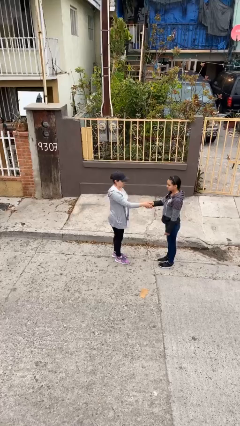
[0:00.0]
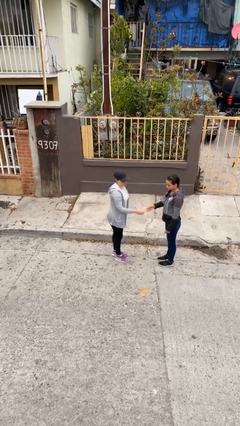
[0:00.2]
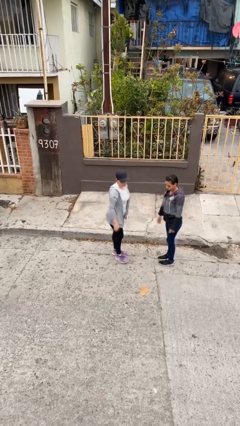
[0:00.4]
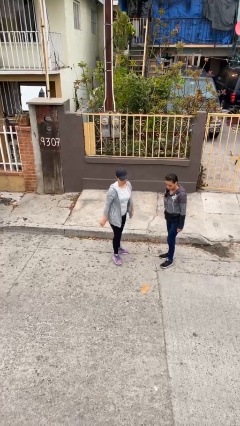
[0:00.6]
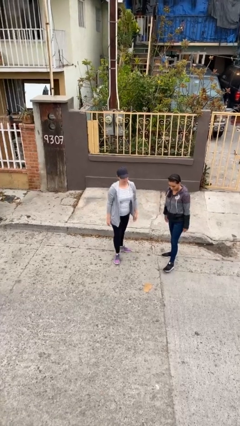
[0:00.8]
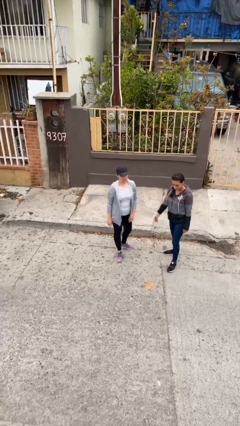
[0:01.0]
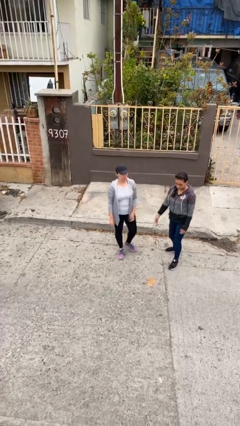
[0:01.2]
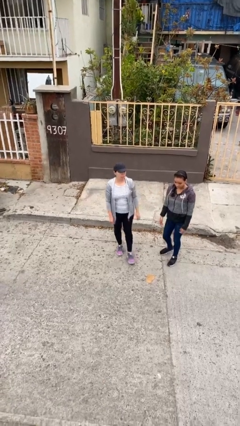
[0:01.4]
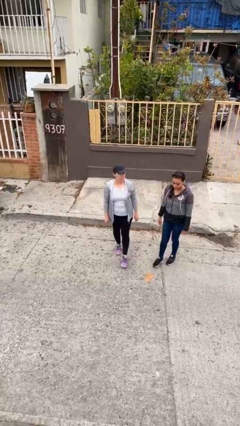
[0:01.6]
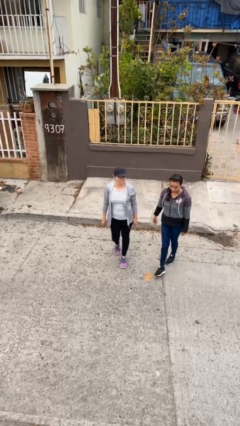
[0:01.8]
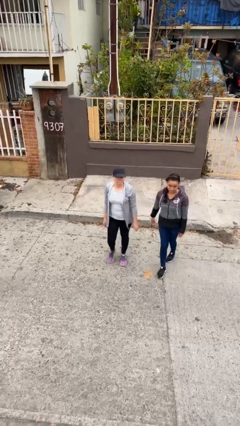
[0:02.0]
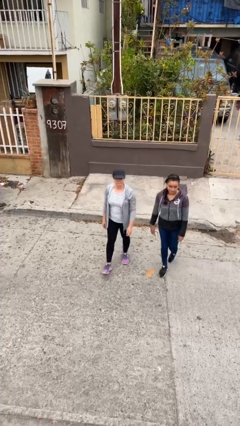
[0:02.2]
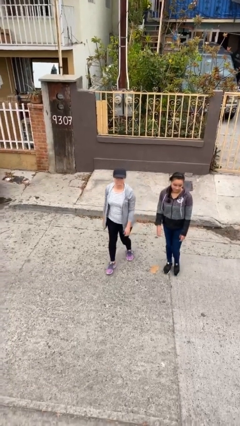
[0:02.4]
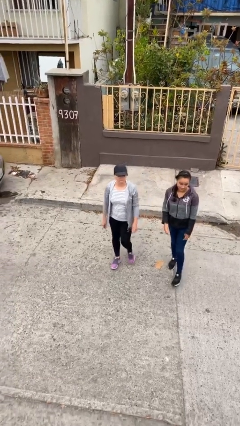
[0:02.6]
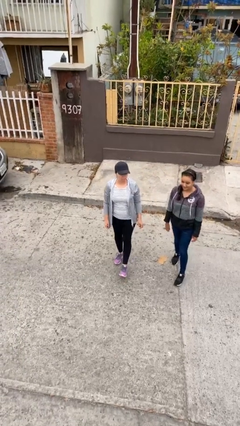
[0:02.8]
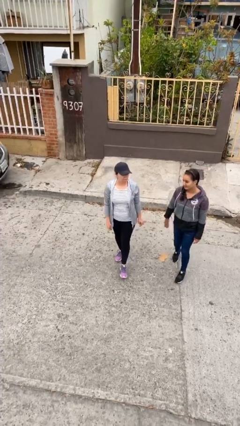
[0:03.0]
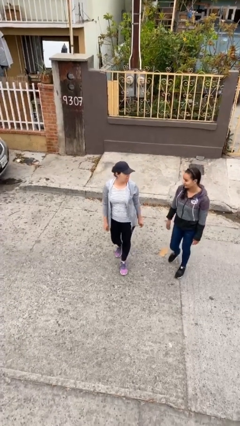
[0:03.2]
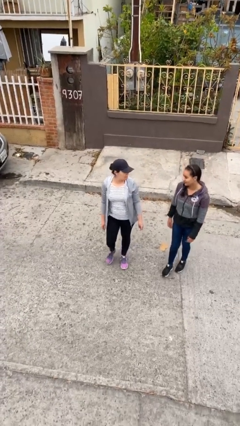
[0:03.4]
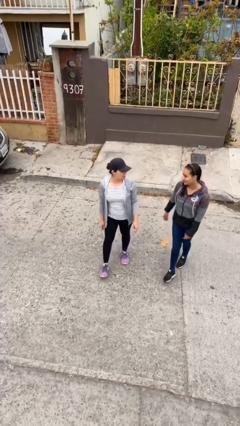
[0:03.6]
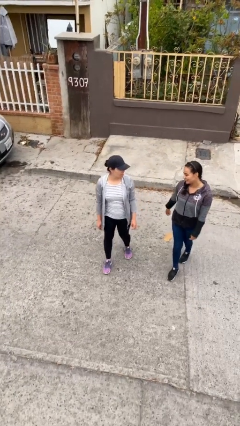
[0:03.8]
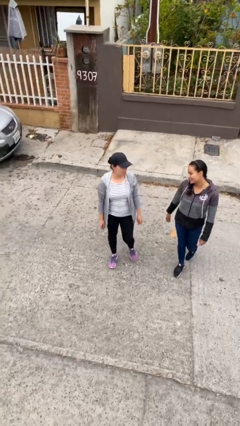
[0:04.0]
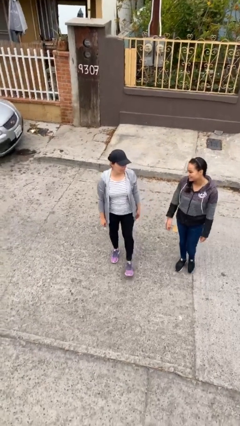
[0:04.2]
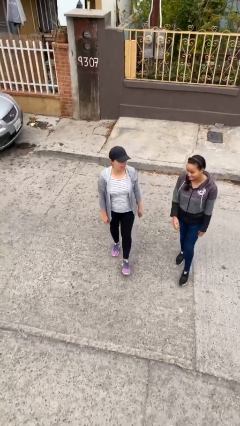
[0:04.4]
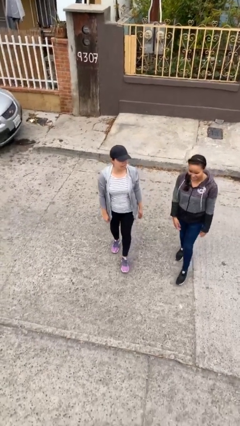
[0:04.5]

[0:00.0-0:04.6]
person talks to person

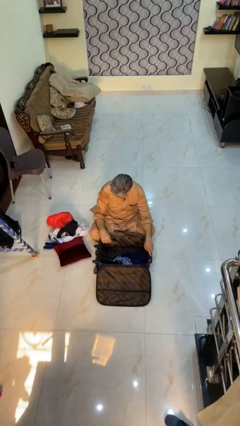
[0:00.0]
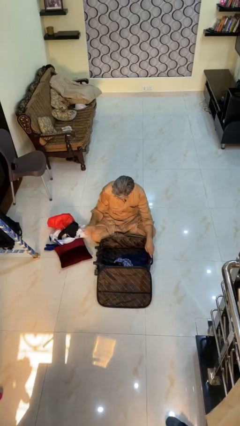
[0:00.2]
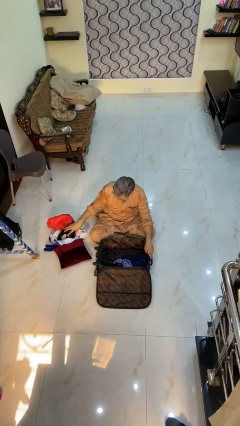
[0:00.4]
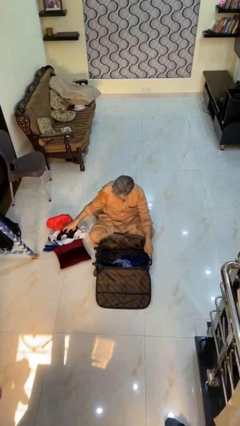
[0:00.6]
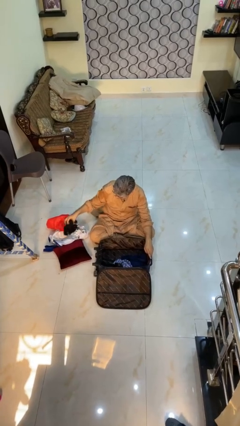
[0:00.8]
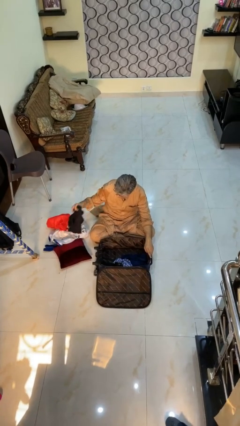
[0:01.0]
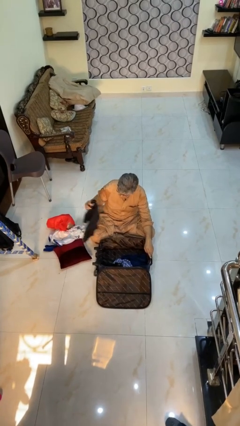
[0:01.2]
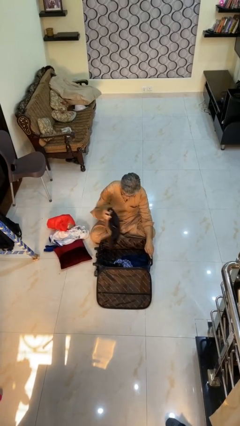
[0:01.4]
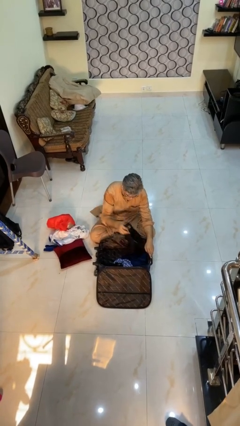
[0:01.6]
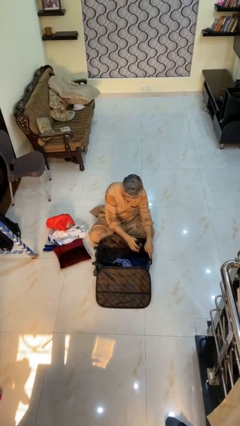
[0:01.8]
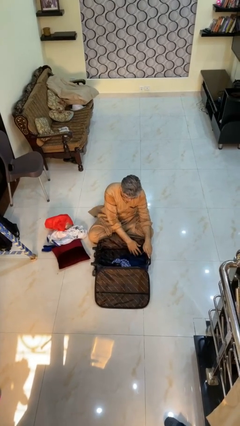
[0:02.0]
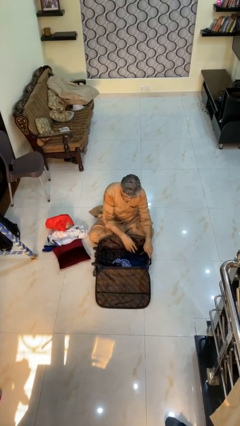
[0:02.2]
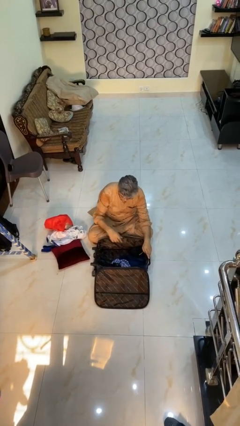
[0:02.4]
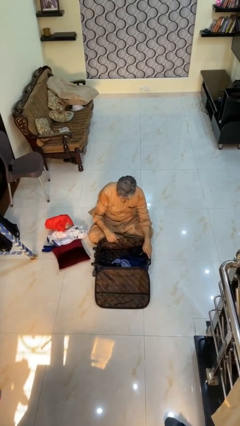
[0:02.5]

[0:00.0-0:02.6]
person loads clothes into suitcase

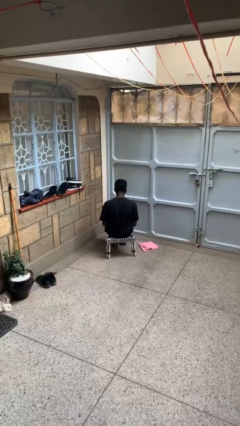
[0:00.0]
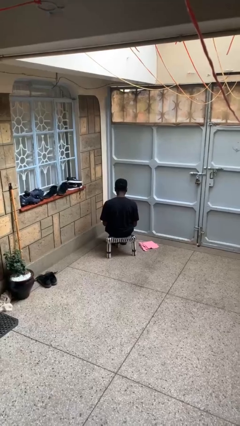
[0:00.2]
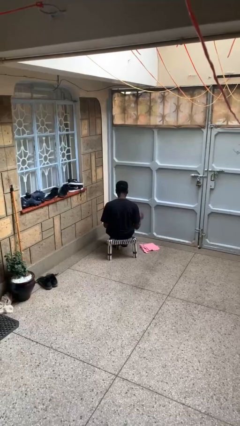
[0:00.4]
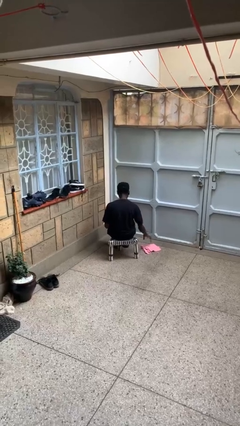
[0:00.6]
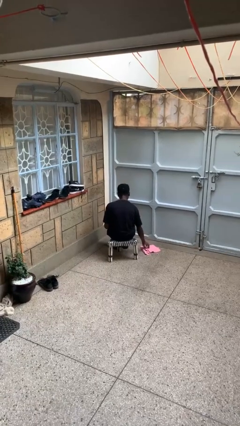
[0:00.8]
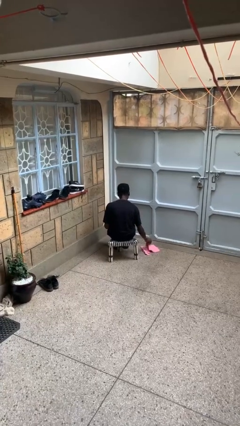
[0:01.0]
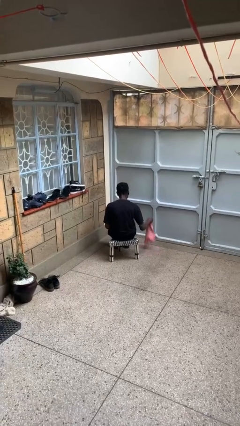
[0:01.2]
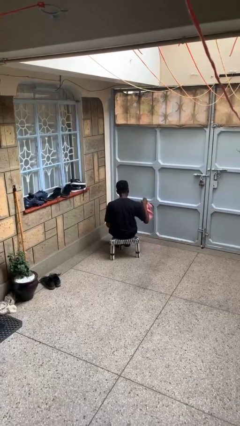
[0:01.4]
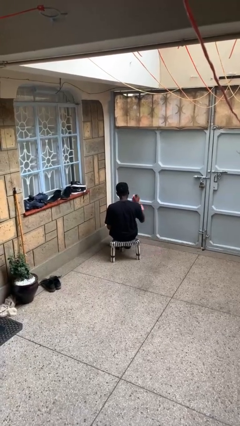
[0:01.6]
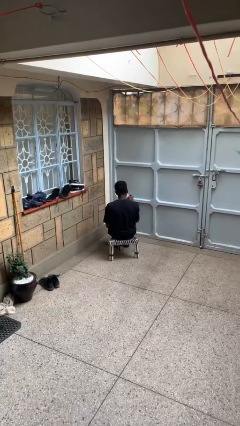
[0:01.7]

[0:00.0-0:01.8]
person picks up object from floor

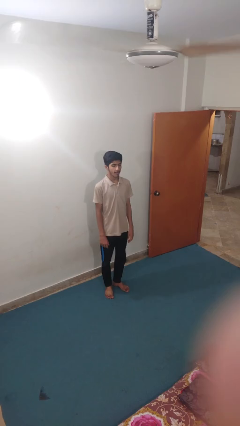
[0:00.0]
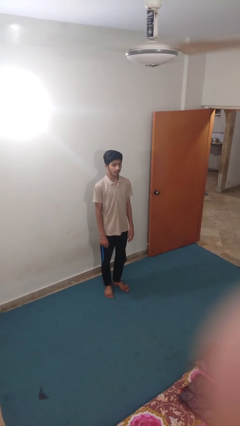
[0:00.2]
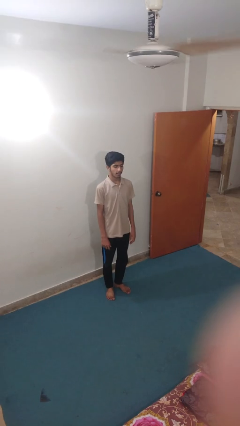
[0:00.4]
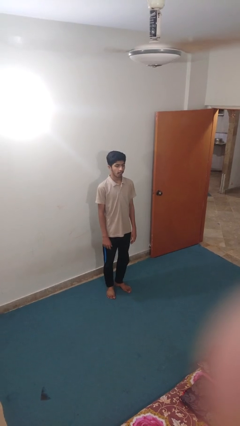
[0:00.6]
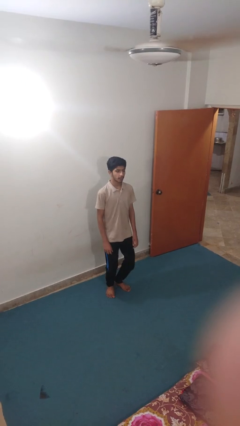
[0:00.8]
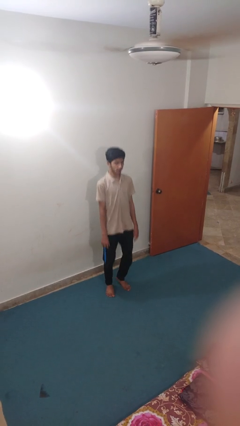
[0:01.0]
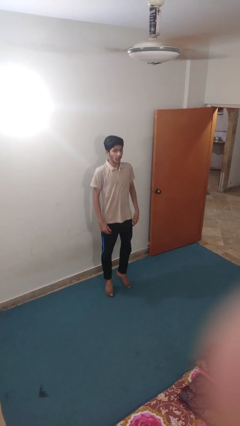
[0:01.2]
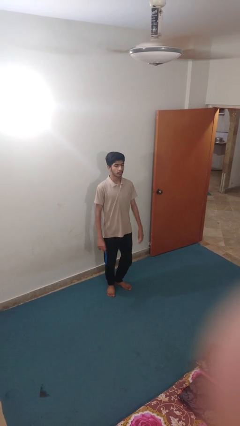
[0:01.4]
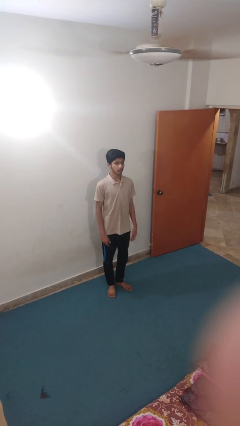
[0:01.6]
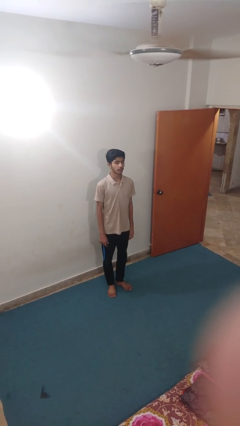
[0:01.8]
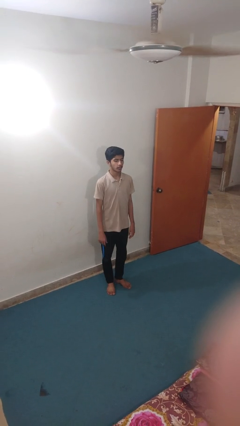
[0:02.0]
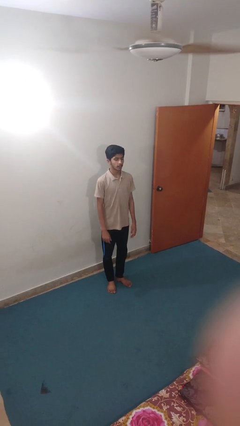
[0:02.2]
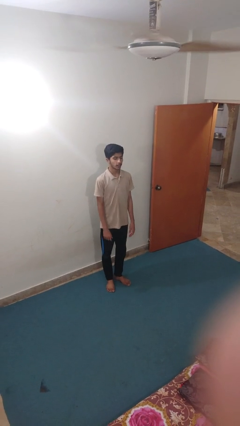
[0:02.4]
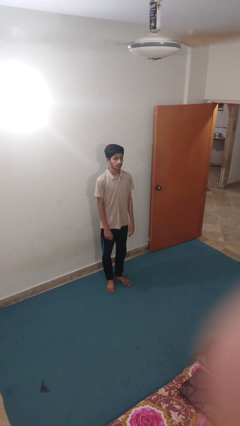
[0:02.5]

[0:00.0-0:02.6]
person jumps

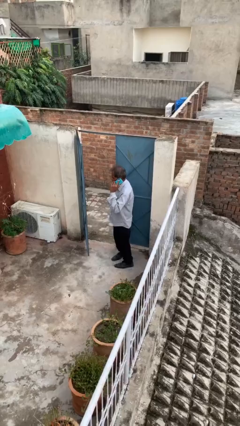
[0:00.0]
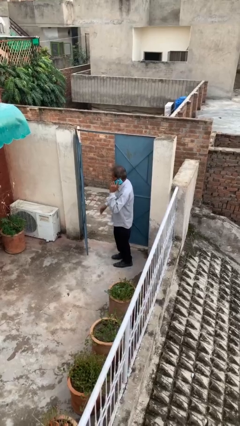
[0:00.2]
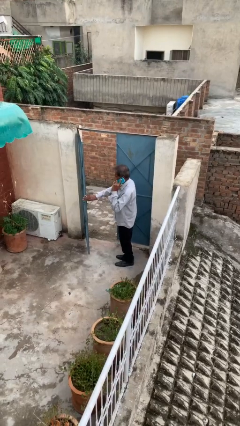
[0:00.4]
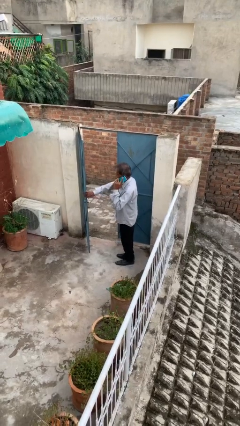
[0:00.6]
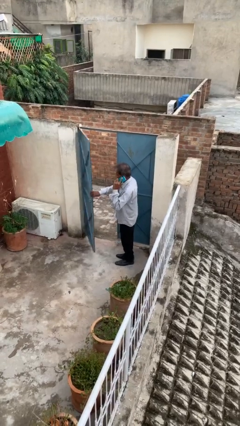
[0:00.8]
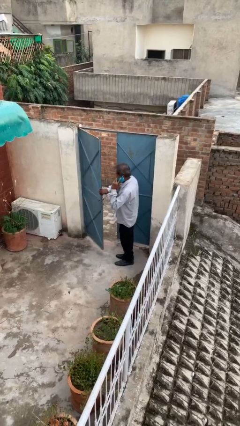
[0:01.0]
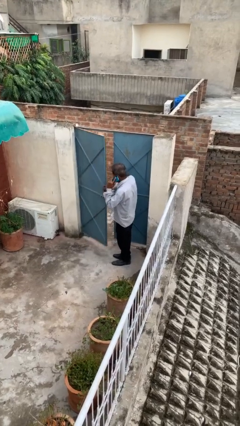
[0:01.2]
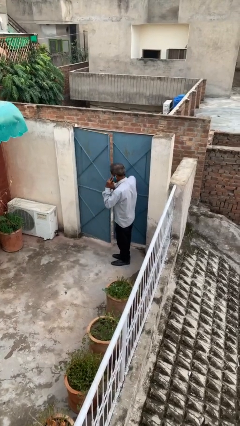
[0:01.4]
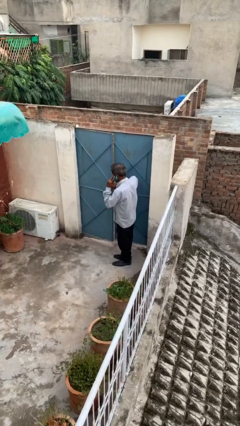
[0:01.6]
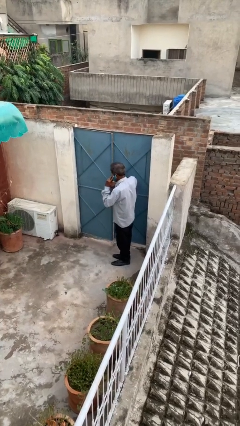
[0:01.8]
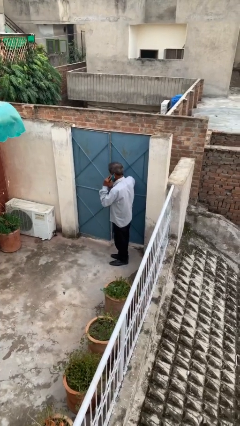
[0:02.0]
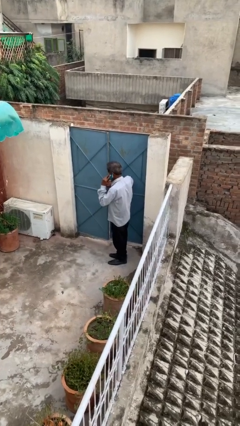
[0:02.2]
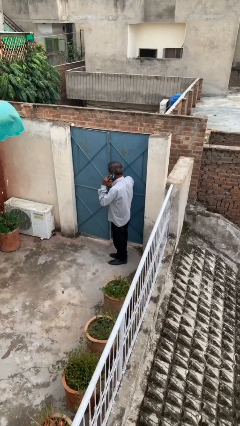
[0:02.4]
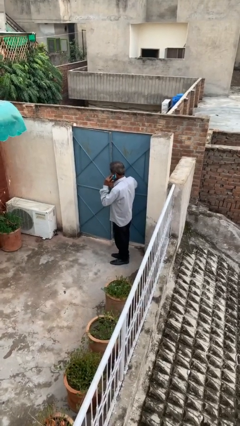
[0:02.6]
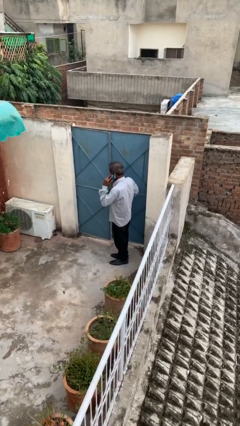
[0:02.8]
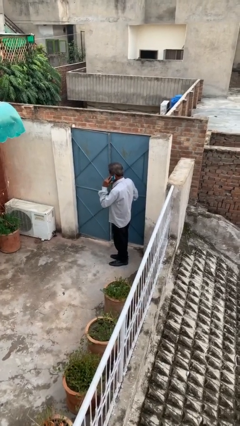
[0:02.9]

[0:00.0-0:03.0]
person closes facility door

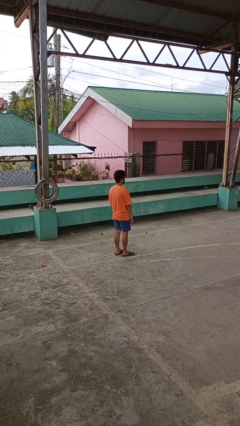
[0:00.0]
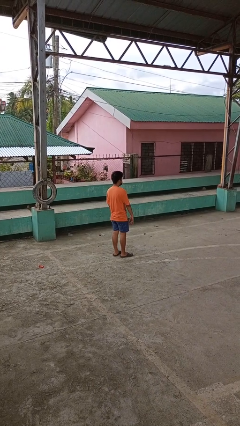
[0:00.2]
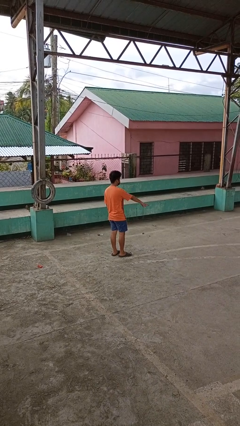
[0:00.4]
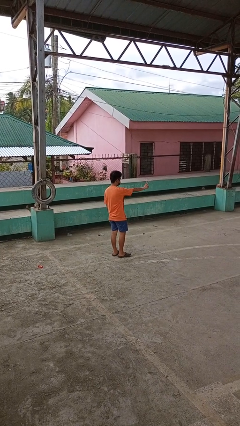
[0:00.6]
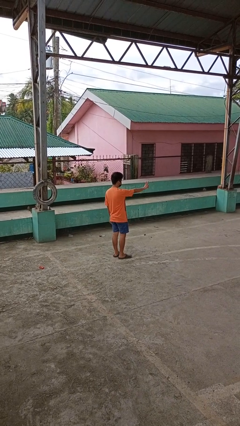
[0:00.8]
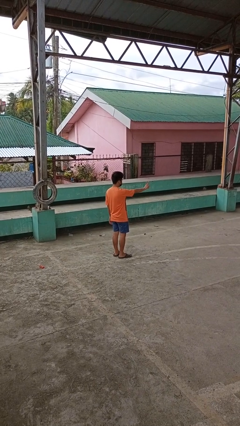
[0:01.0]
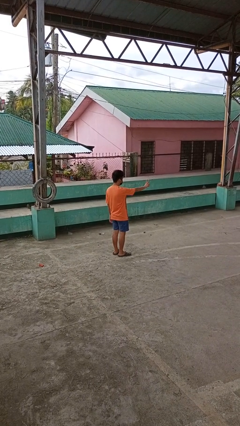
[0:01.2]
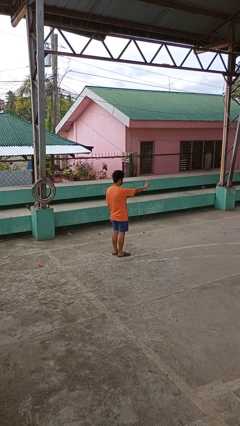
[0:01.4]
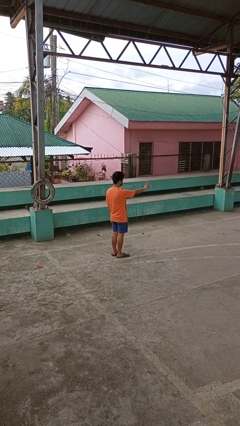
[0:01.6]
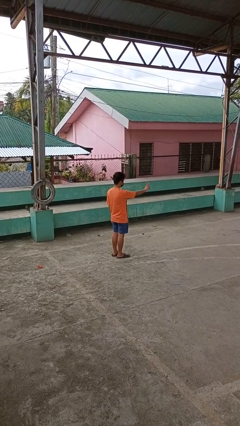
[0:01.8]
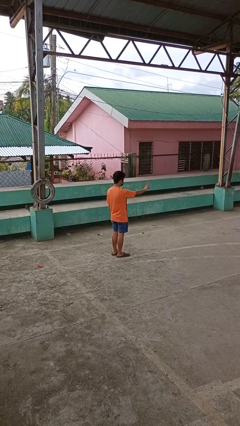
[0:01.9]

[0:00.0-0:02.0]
person gestures peace

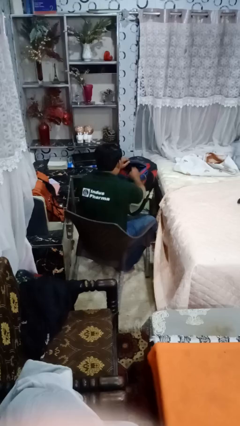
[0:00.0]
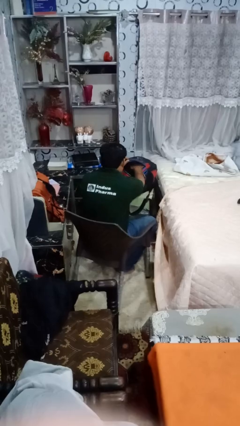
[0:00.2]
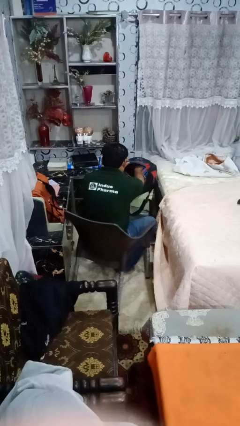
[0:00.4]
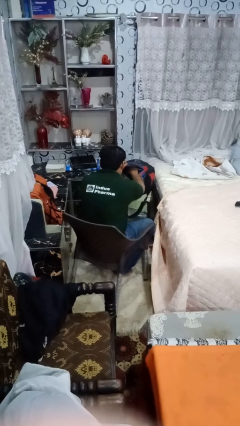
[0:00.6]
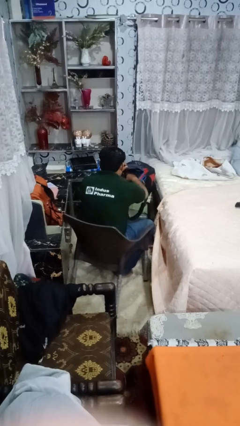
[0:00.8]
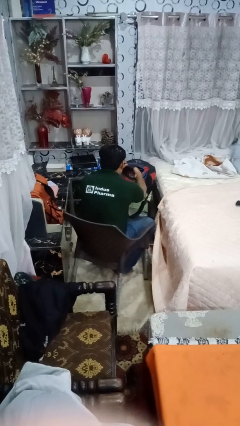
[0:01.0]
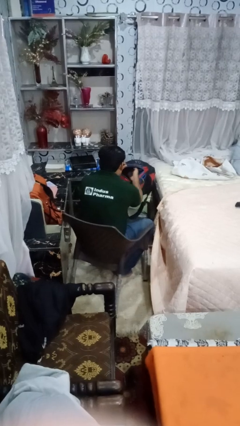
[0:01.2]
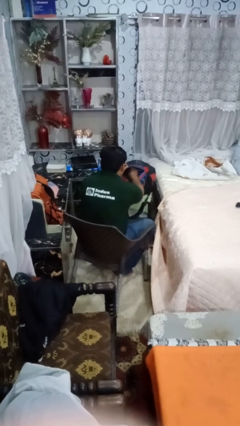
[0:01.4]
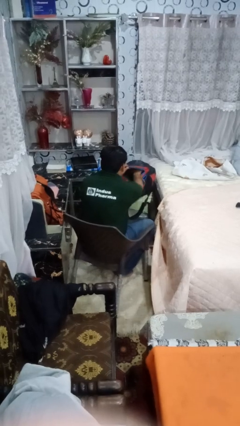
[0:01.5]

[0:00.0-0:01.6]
person searches in backpack
